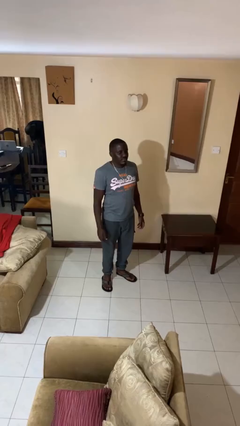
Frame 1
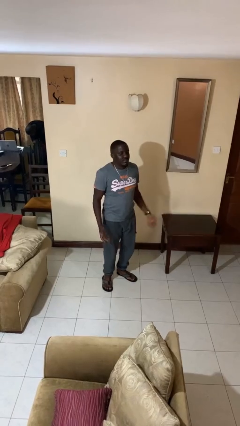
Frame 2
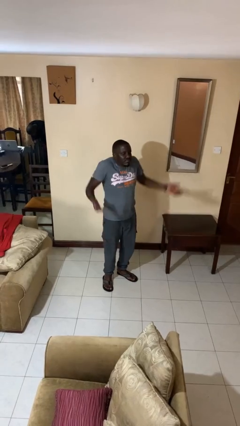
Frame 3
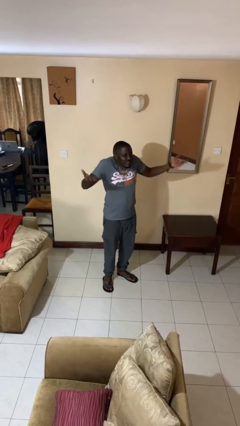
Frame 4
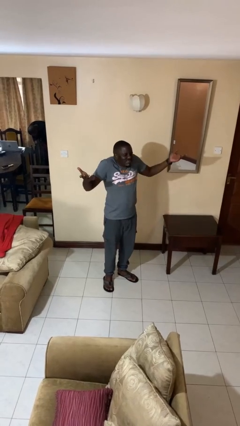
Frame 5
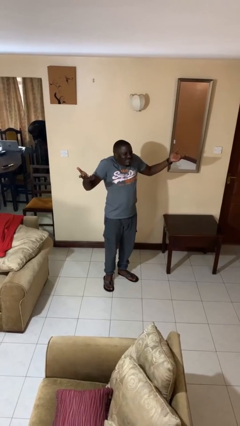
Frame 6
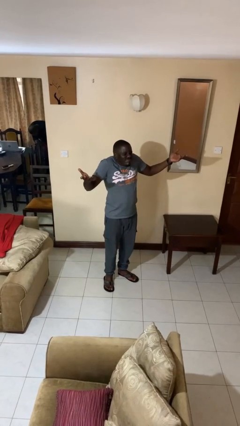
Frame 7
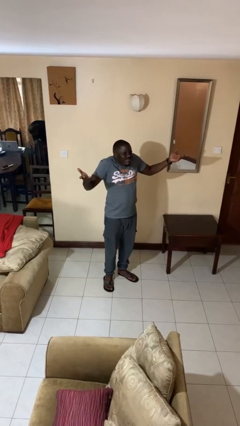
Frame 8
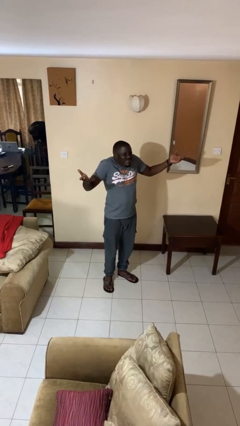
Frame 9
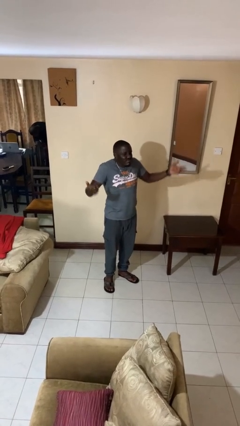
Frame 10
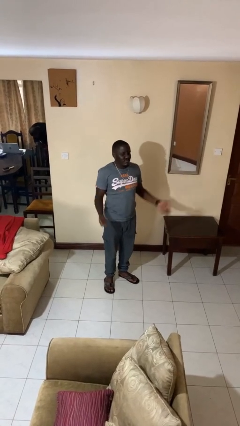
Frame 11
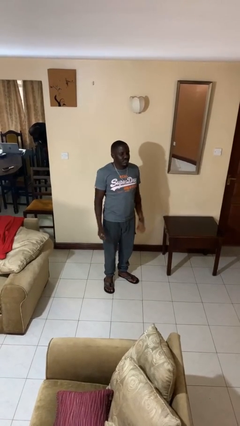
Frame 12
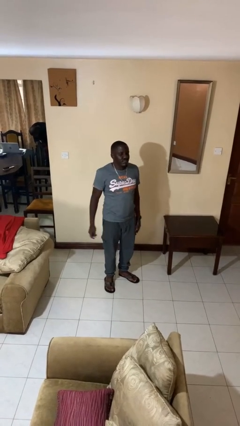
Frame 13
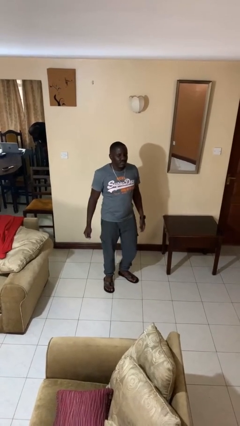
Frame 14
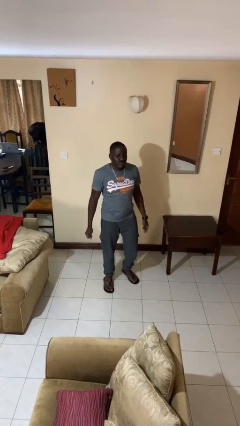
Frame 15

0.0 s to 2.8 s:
person shrugs

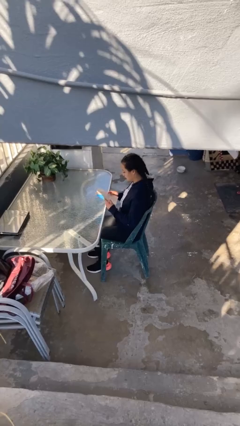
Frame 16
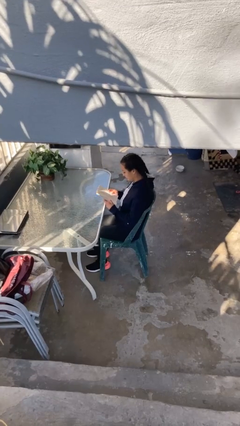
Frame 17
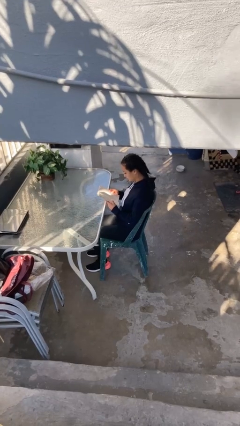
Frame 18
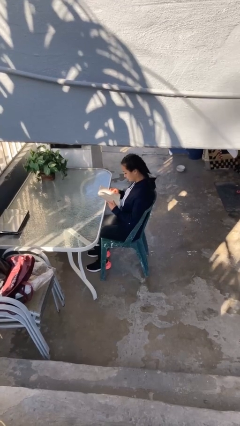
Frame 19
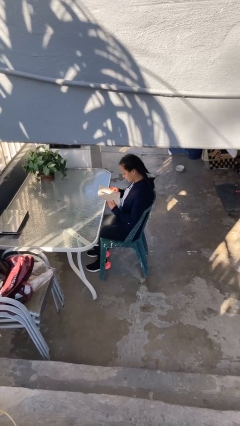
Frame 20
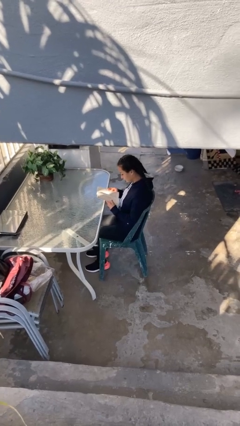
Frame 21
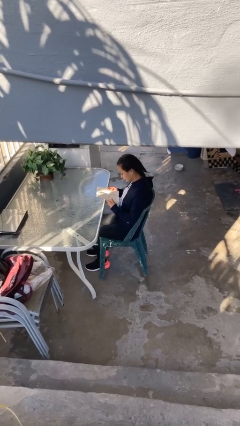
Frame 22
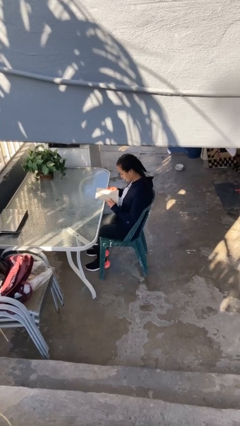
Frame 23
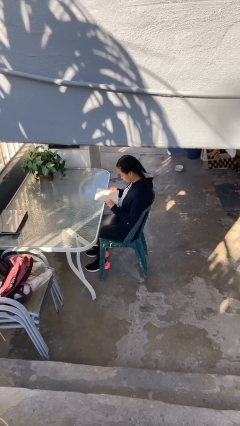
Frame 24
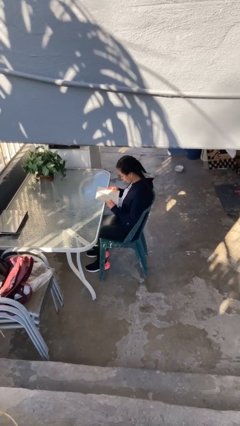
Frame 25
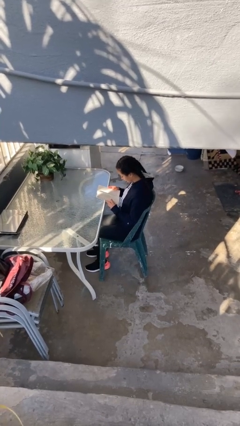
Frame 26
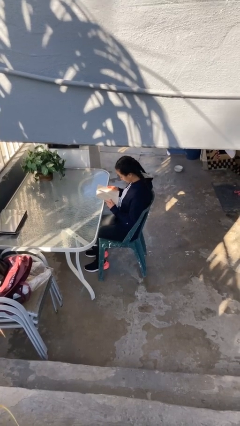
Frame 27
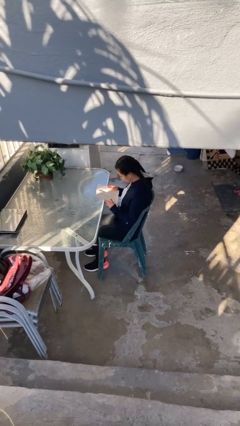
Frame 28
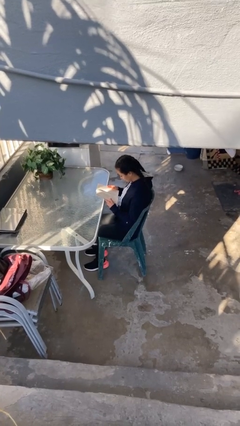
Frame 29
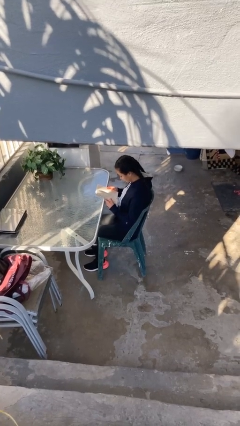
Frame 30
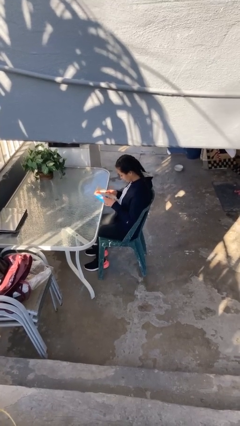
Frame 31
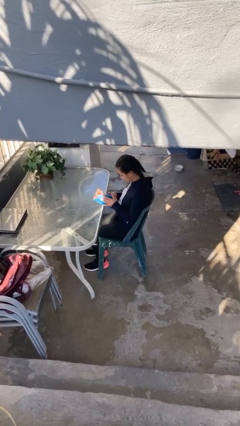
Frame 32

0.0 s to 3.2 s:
person reads document

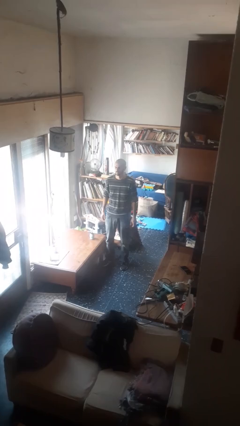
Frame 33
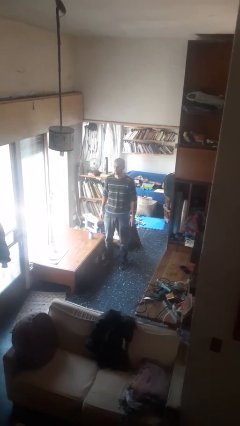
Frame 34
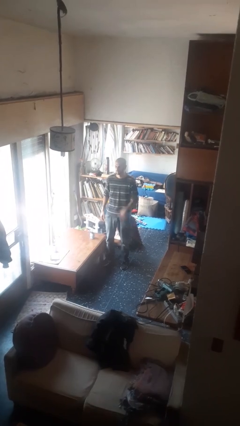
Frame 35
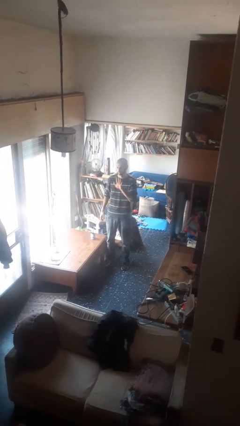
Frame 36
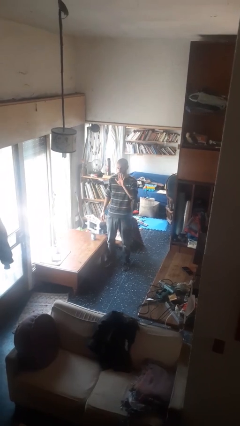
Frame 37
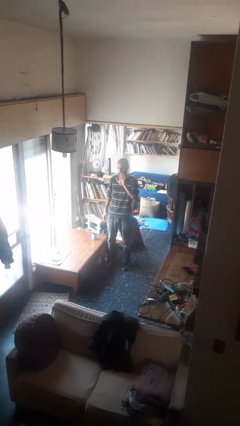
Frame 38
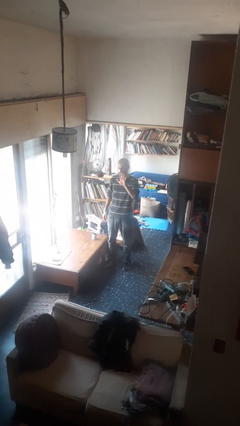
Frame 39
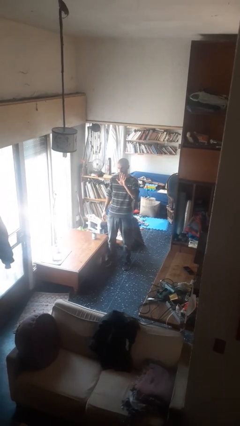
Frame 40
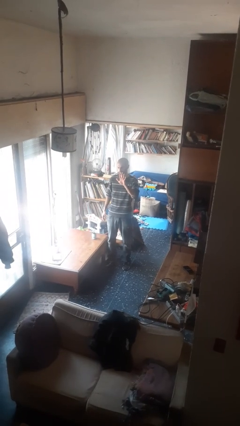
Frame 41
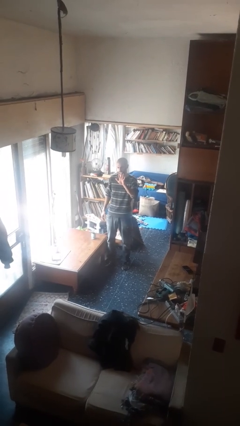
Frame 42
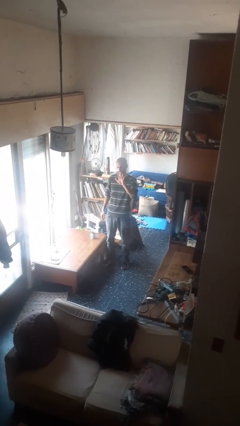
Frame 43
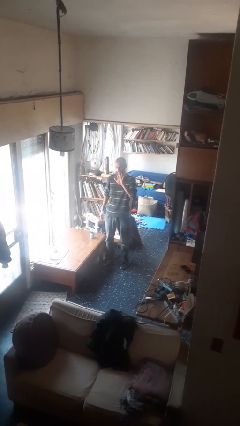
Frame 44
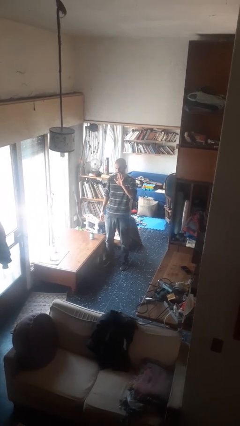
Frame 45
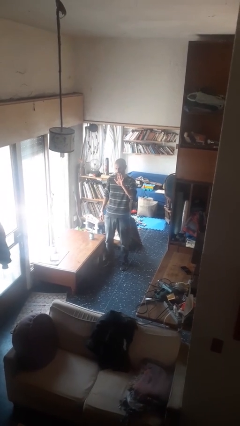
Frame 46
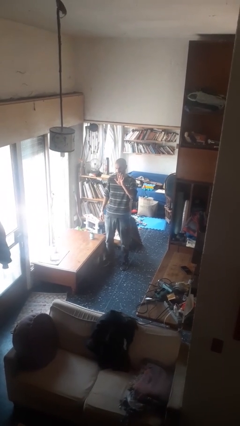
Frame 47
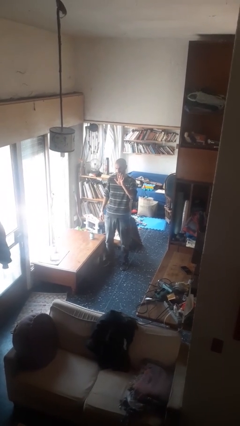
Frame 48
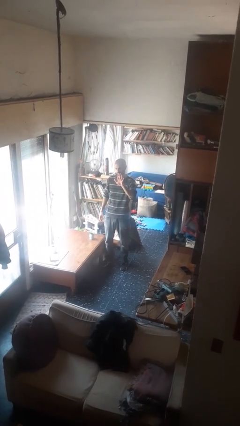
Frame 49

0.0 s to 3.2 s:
person gestures number five

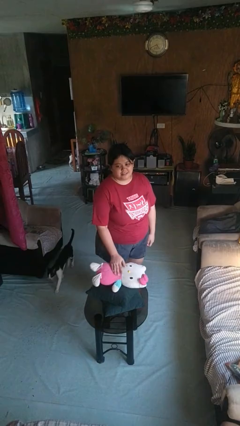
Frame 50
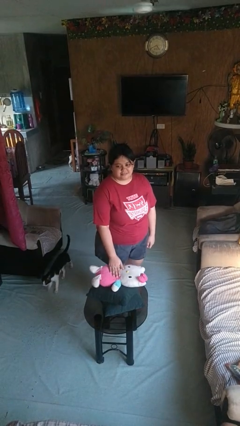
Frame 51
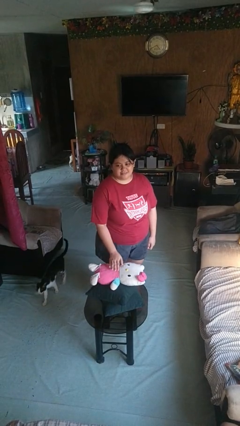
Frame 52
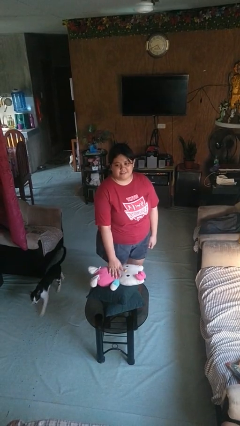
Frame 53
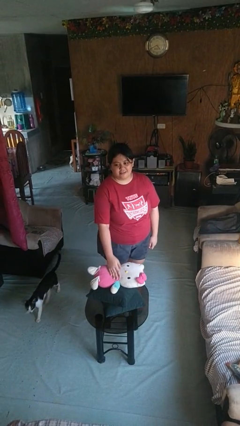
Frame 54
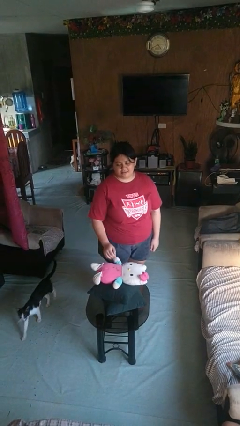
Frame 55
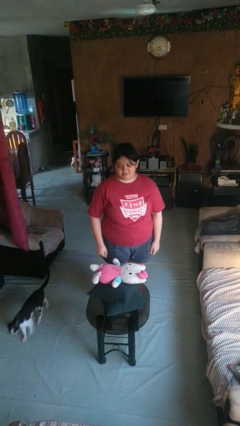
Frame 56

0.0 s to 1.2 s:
person taps object with finger

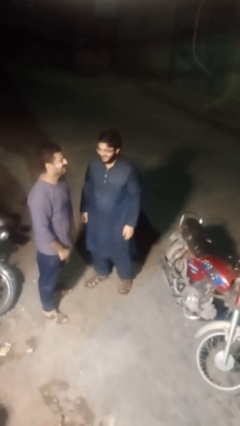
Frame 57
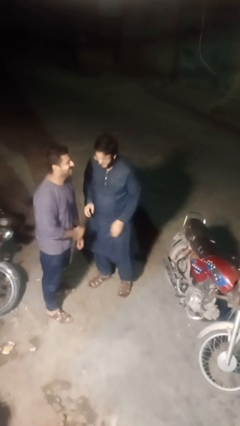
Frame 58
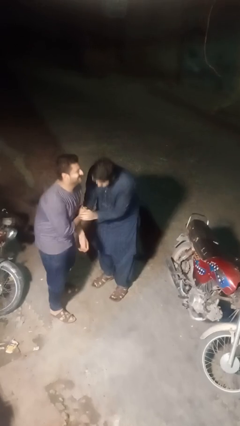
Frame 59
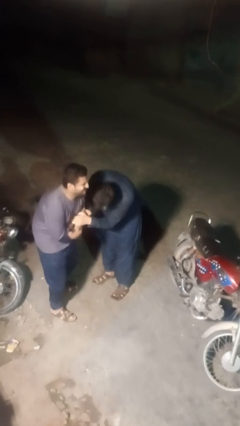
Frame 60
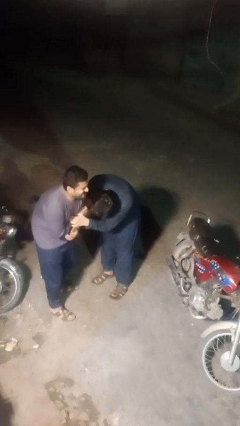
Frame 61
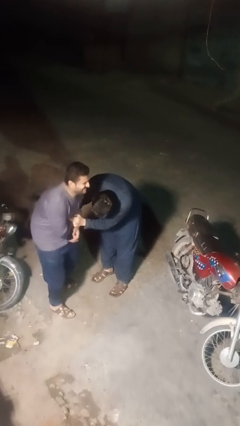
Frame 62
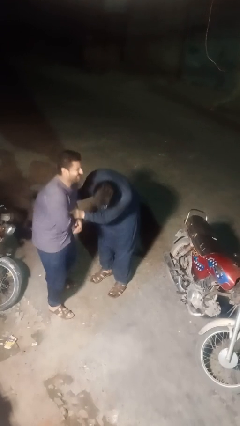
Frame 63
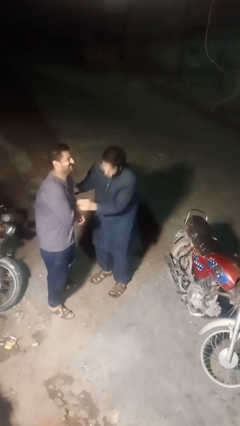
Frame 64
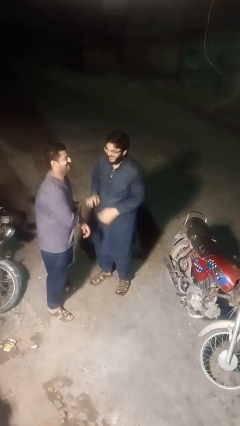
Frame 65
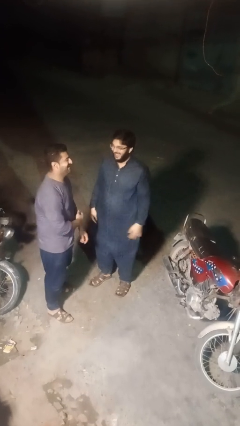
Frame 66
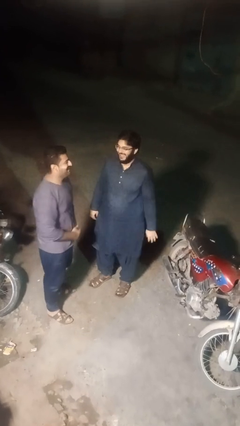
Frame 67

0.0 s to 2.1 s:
person tickles person

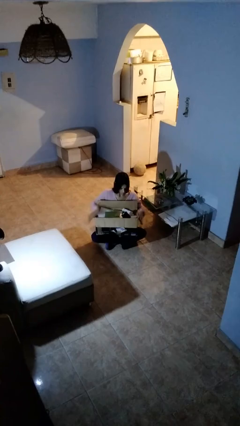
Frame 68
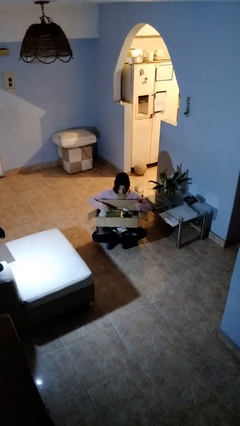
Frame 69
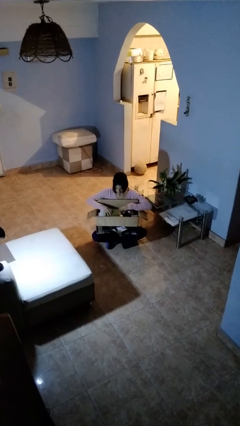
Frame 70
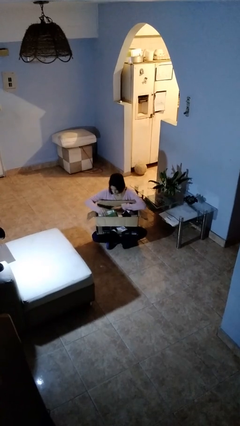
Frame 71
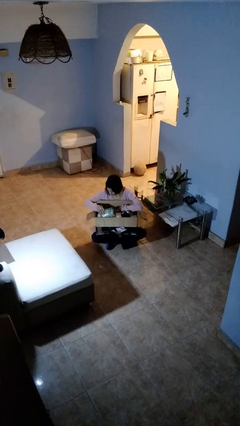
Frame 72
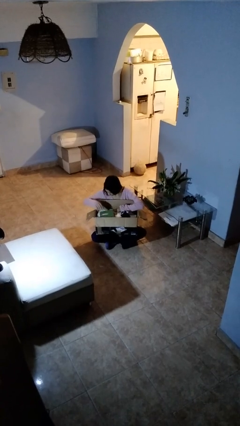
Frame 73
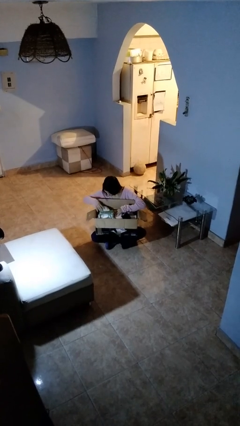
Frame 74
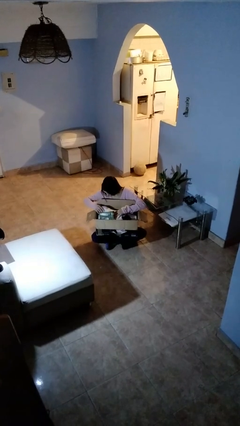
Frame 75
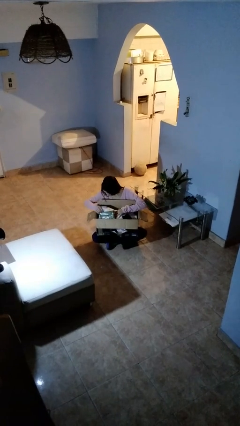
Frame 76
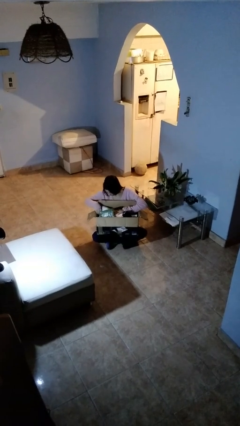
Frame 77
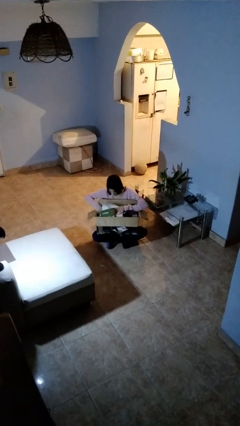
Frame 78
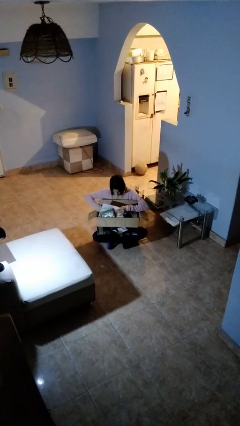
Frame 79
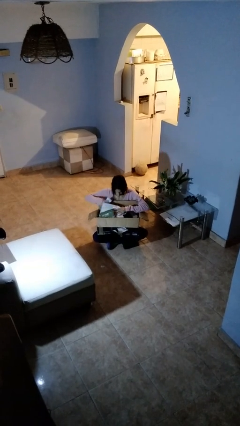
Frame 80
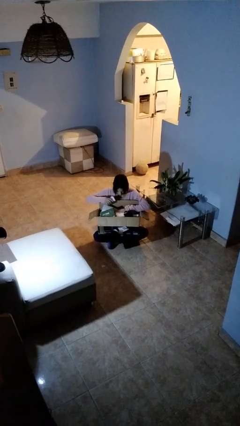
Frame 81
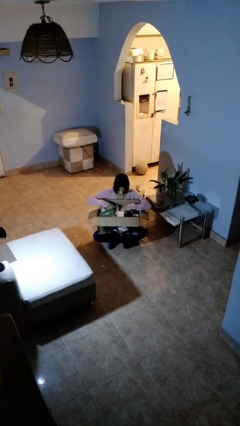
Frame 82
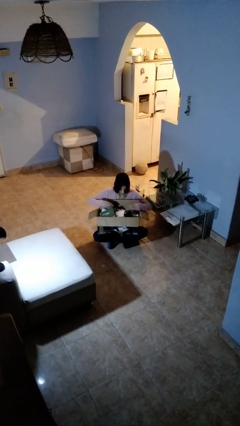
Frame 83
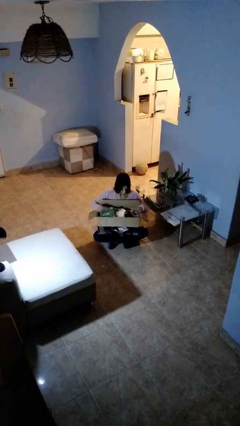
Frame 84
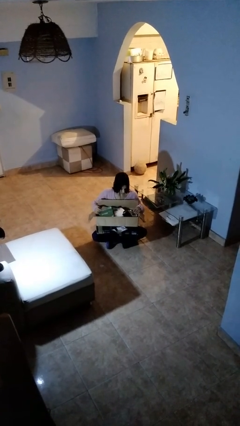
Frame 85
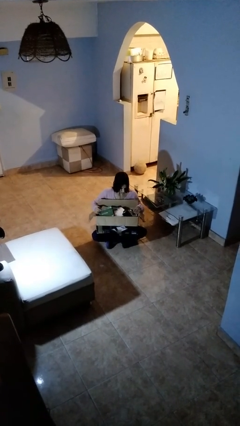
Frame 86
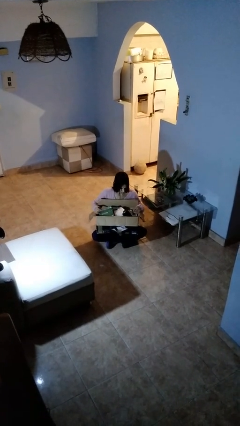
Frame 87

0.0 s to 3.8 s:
person searches in box

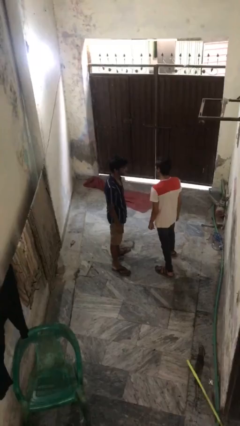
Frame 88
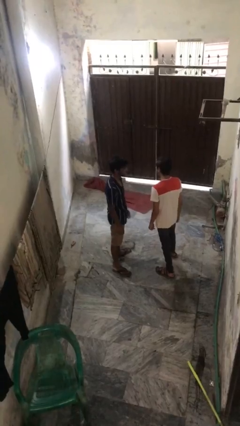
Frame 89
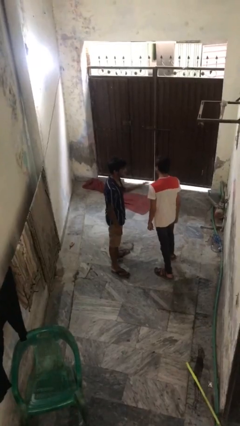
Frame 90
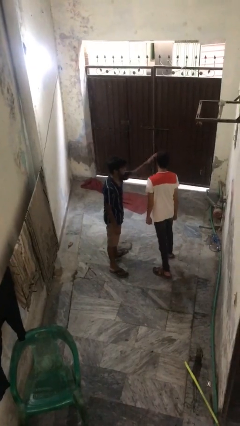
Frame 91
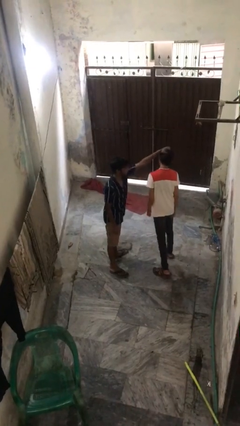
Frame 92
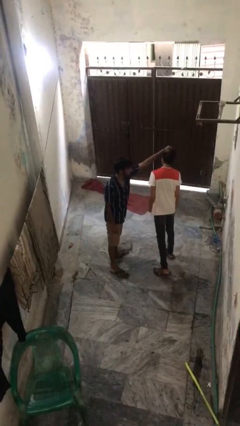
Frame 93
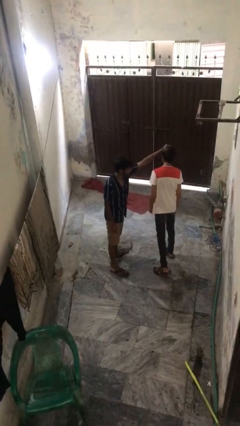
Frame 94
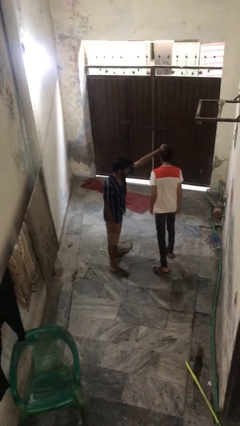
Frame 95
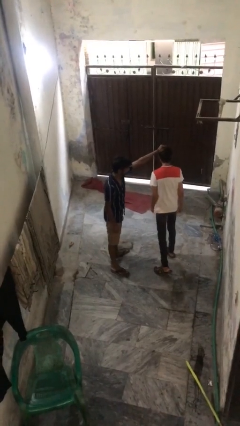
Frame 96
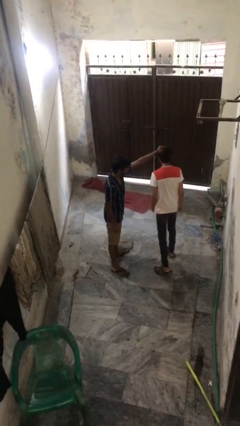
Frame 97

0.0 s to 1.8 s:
person grabs person by hair
